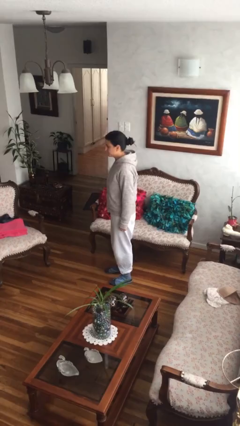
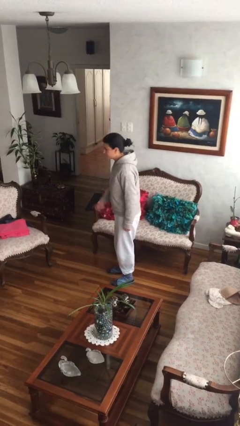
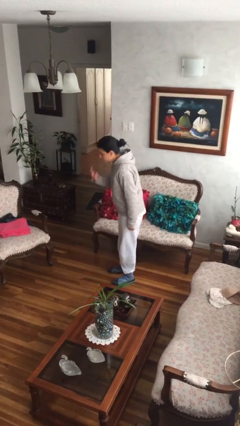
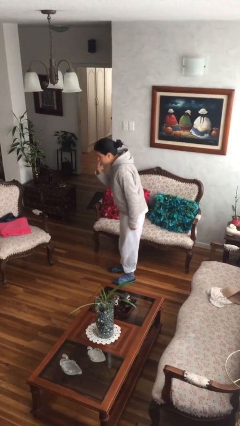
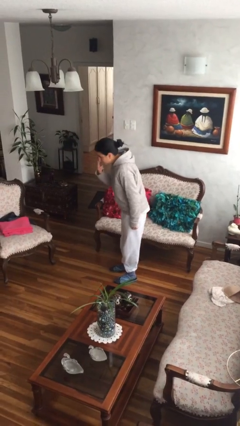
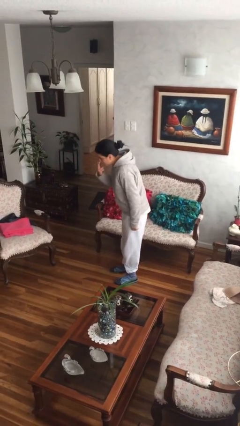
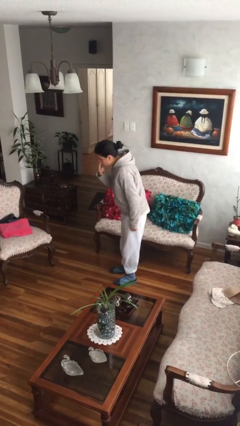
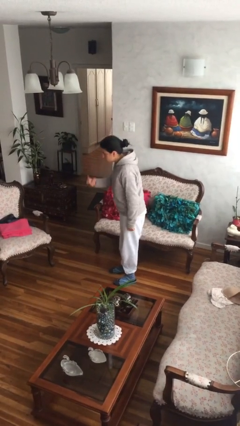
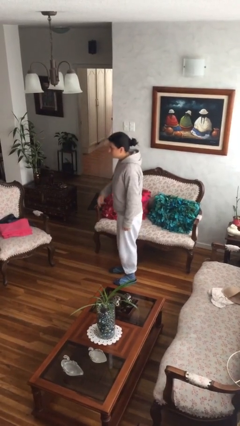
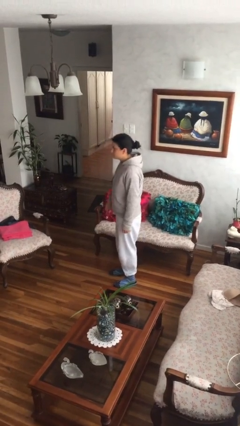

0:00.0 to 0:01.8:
person gestures watch closely

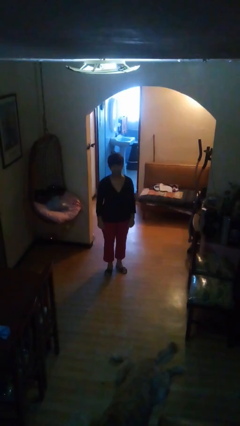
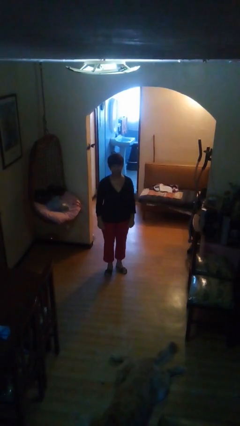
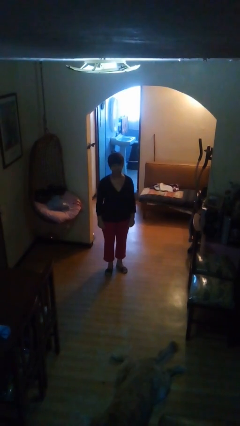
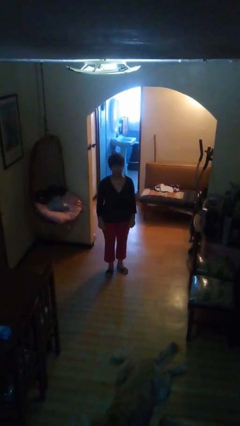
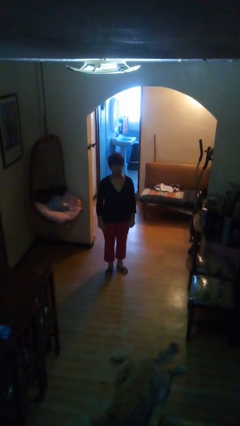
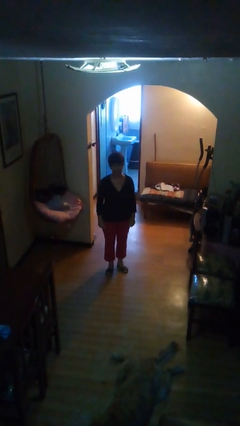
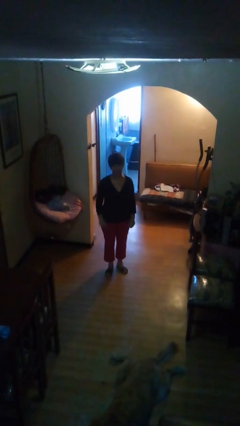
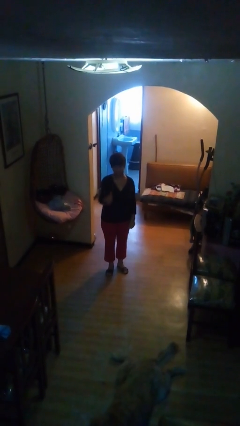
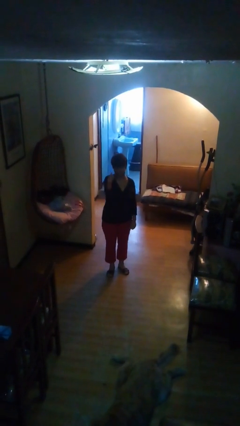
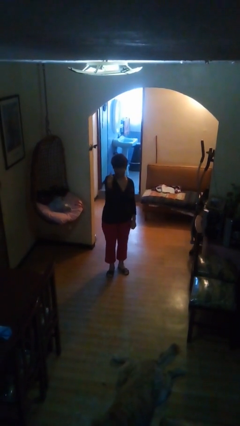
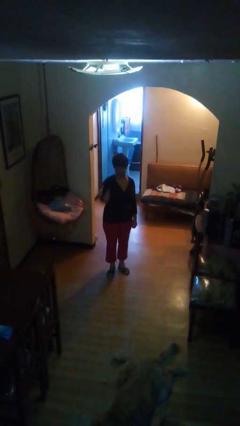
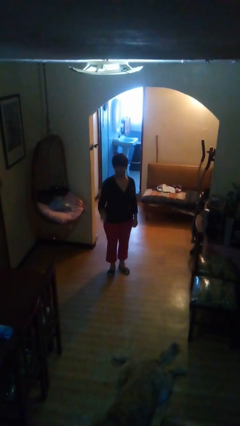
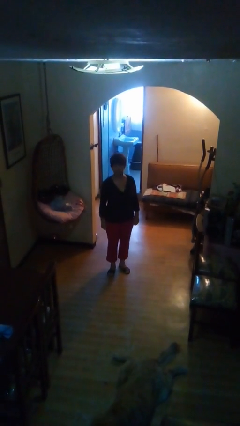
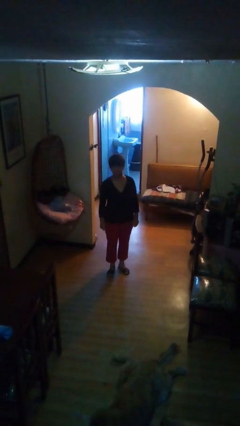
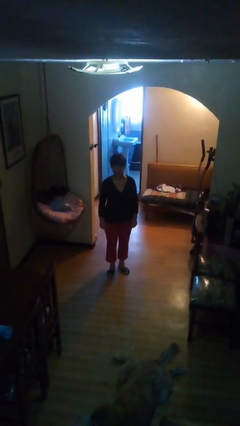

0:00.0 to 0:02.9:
person gestures thumbs up

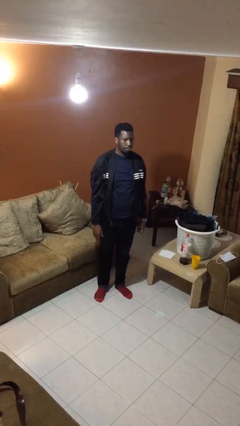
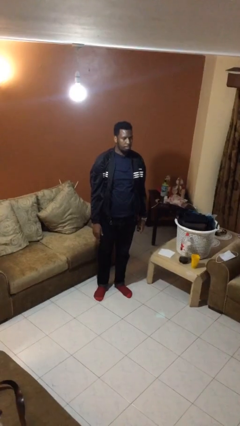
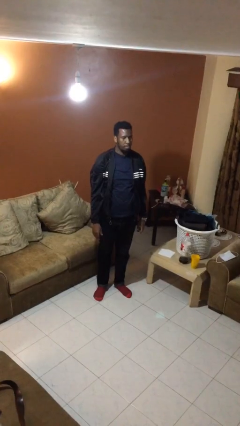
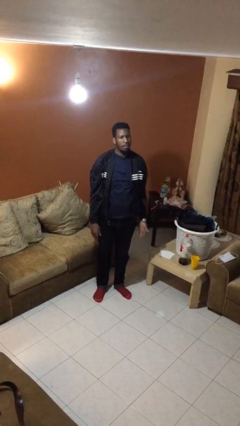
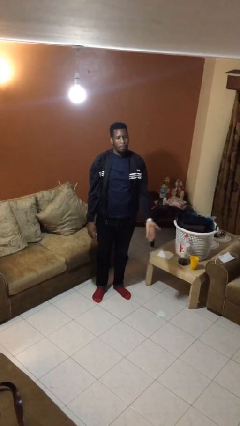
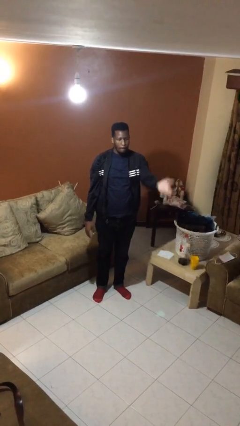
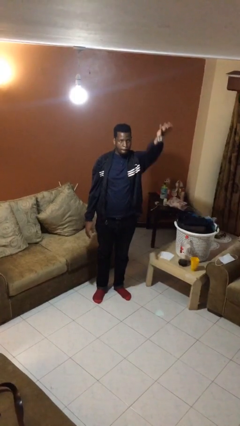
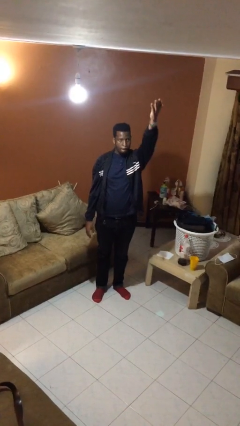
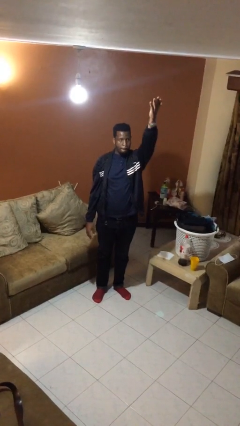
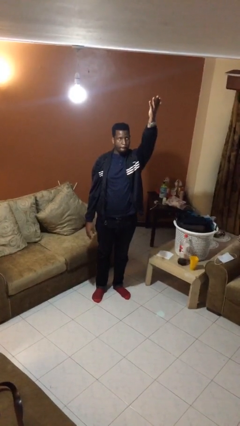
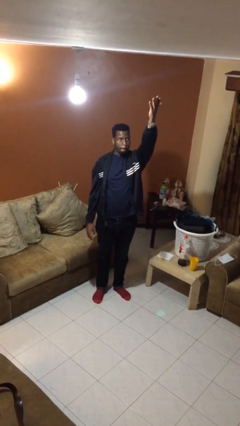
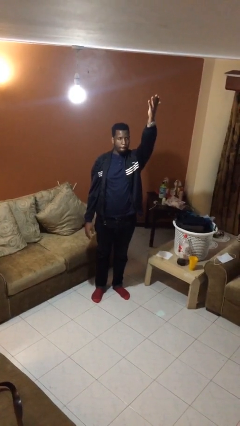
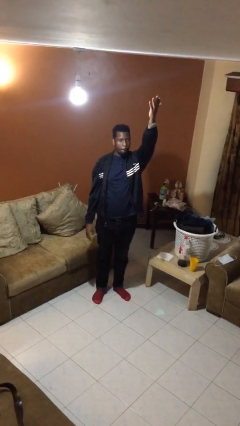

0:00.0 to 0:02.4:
person gestures swipe up

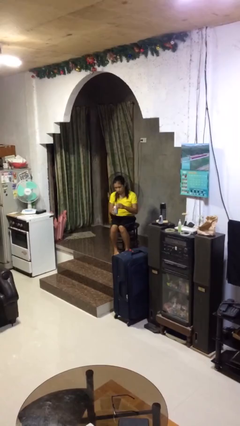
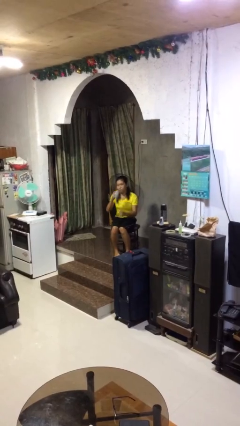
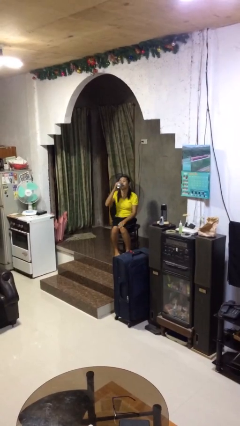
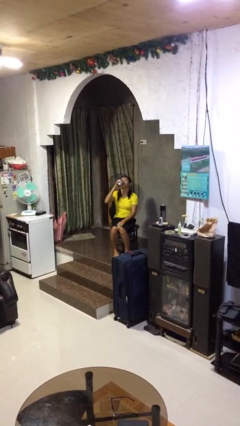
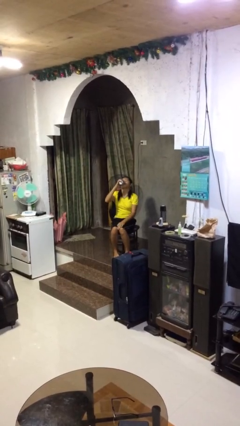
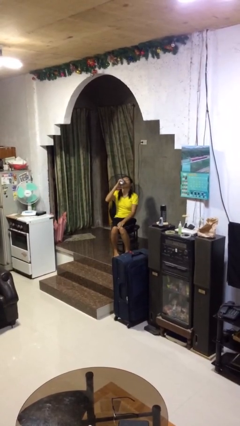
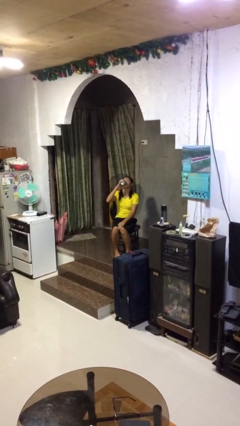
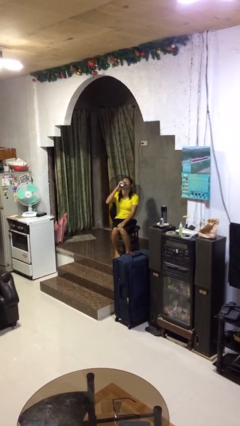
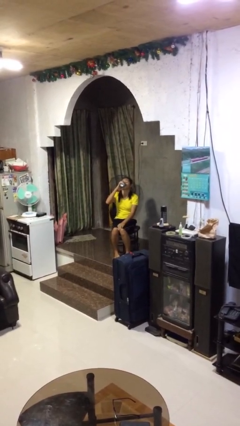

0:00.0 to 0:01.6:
person drinks from beverage can

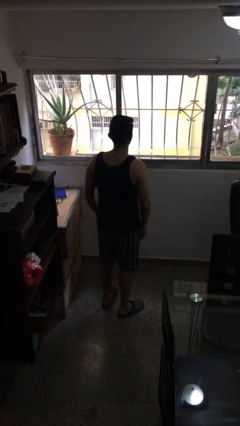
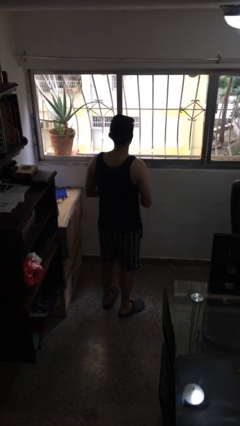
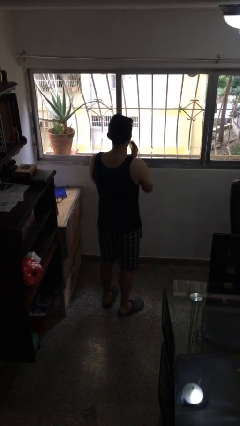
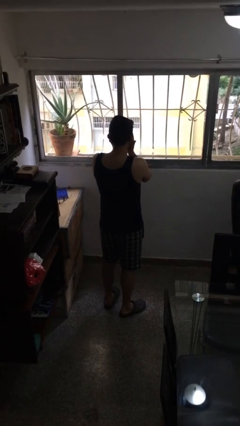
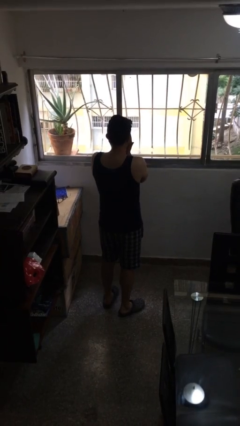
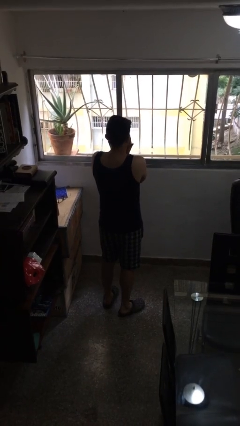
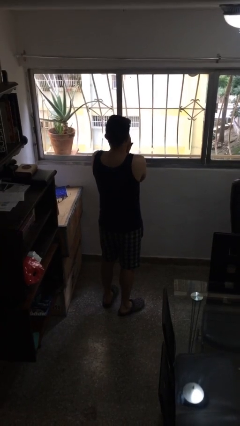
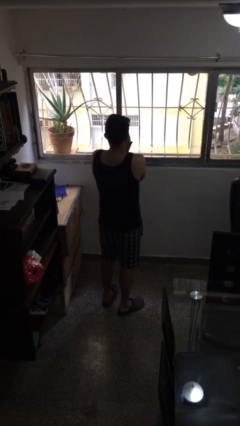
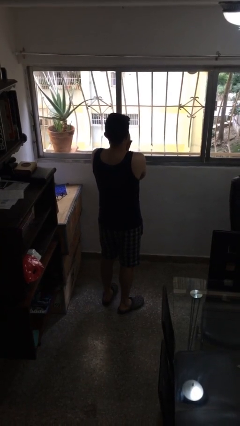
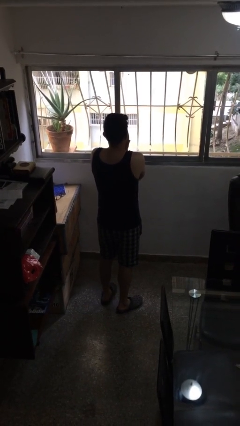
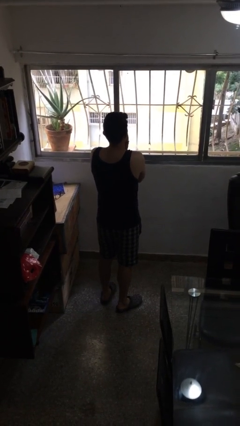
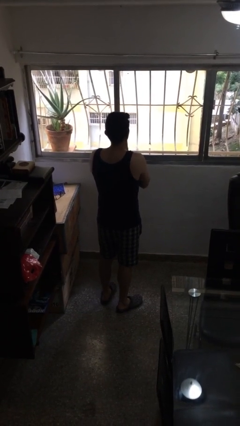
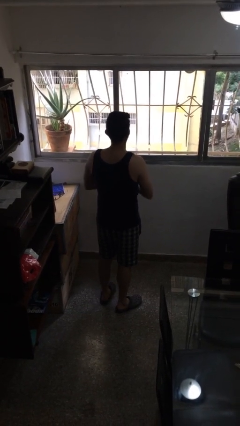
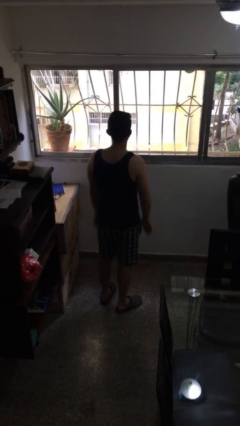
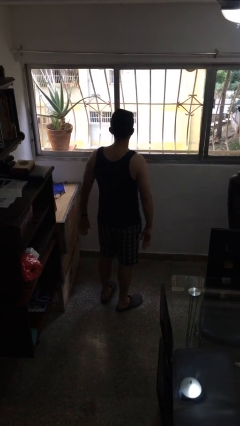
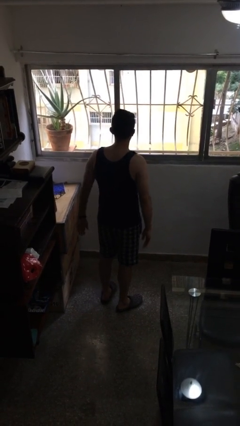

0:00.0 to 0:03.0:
person rubs eyes

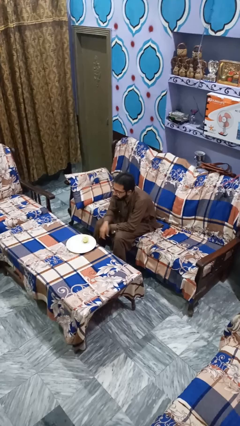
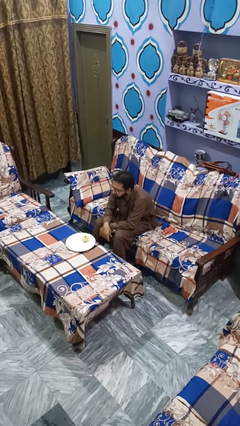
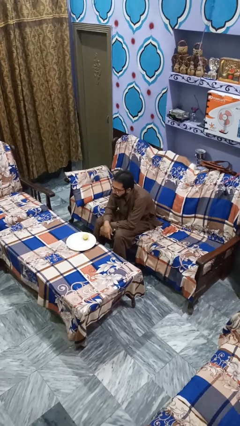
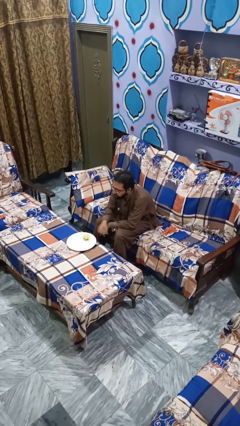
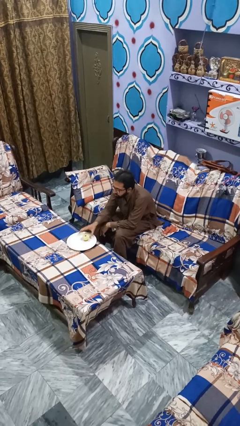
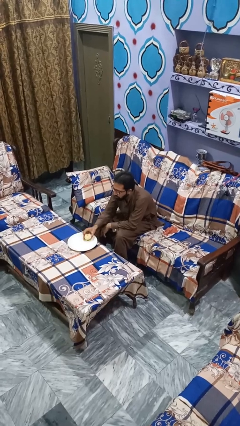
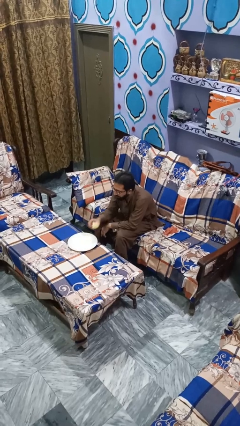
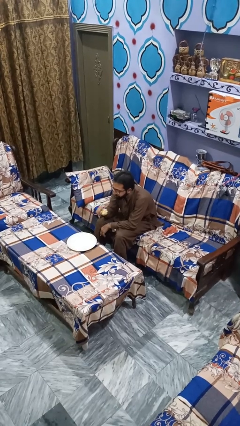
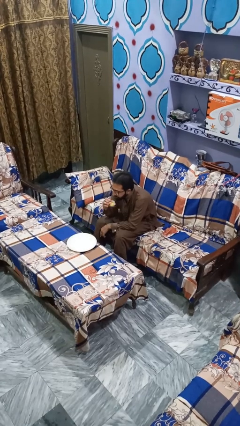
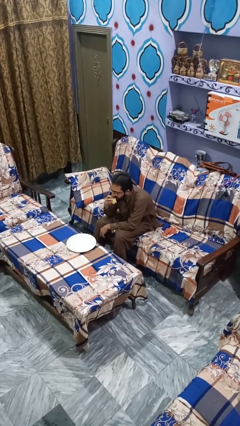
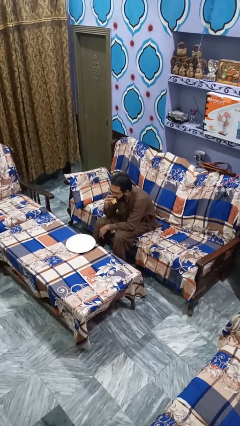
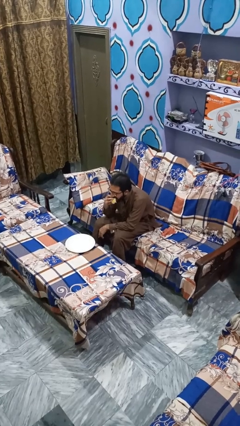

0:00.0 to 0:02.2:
person eats apple

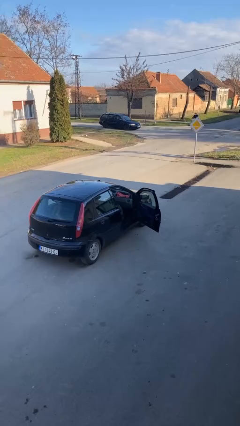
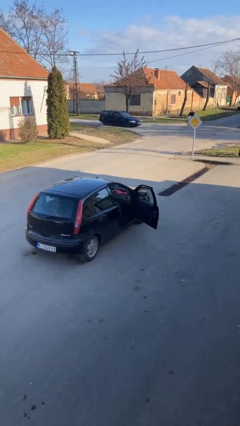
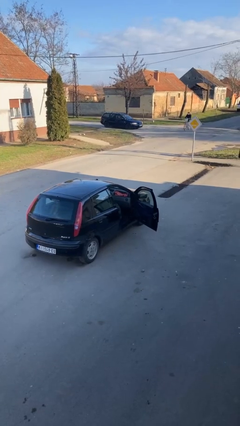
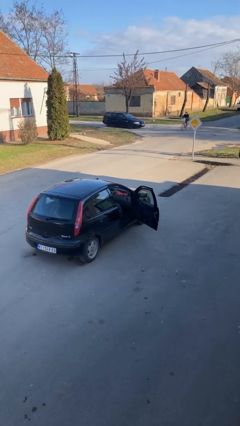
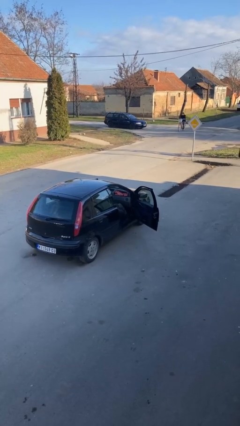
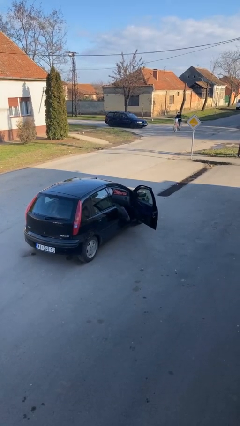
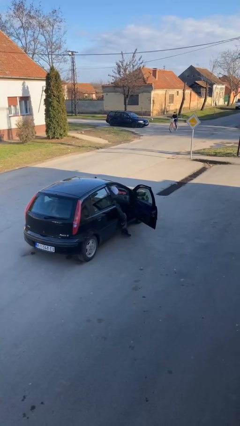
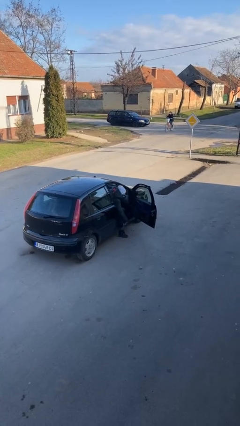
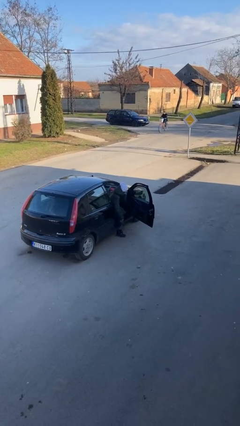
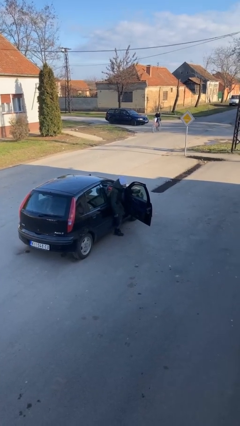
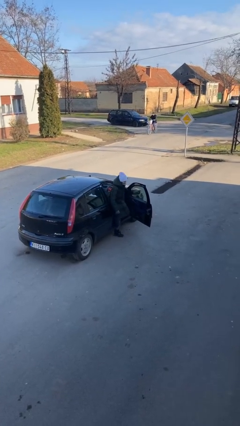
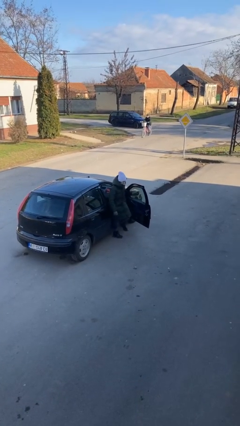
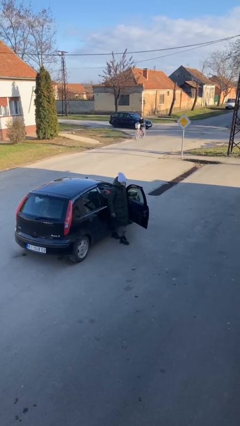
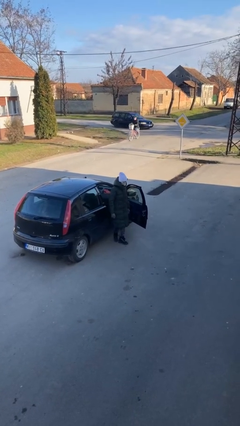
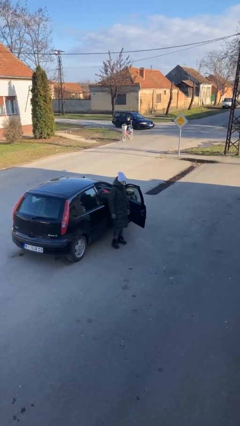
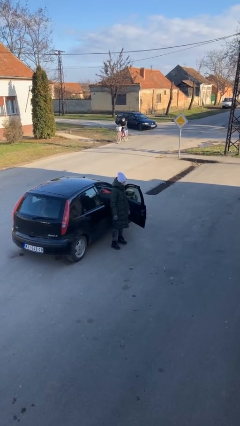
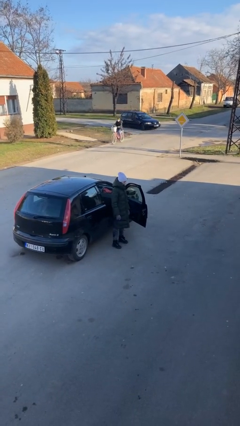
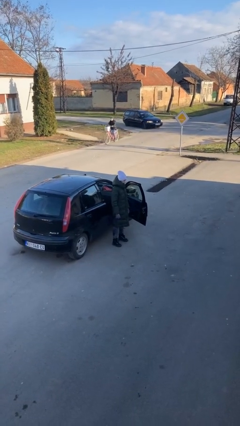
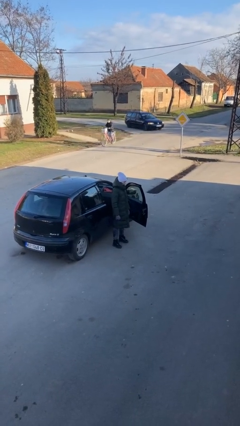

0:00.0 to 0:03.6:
person exits car
